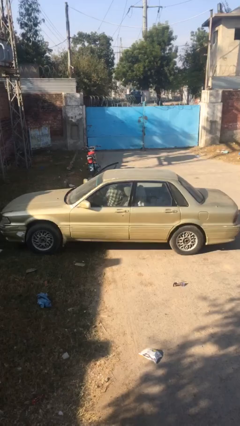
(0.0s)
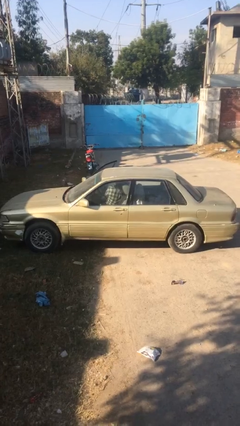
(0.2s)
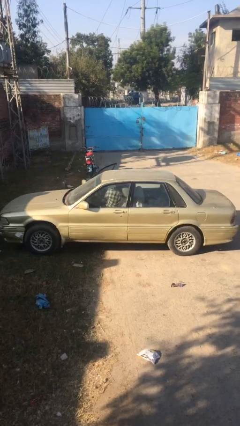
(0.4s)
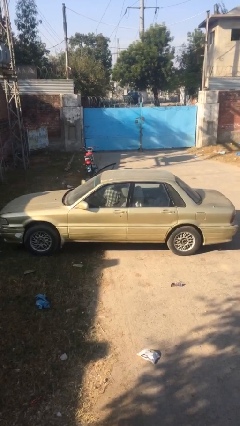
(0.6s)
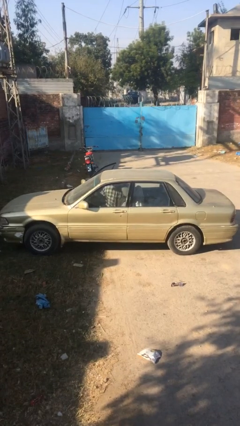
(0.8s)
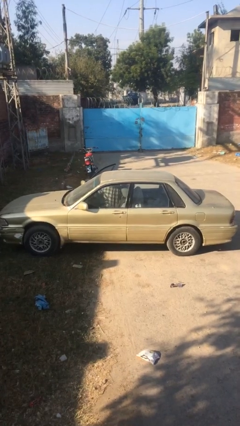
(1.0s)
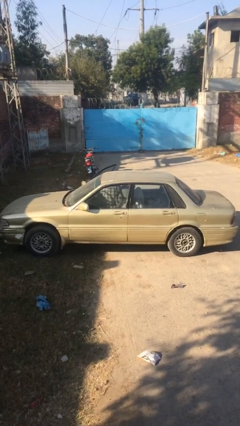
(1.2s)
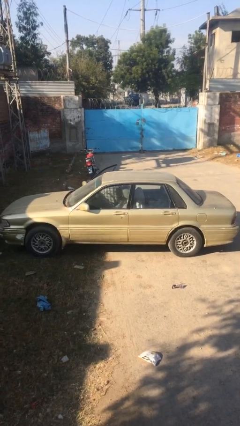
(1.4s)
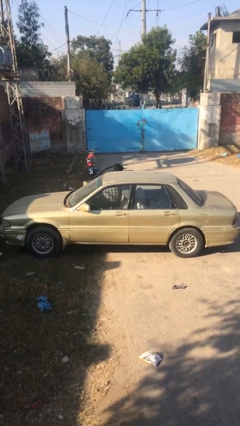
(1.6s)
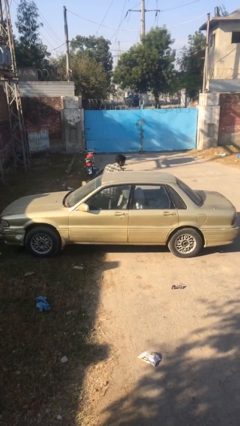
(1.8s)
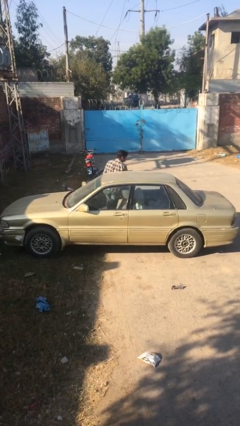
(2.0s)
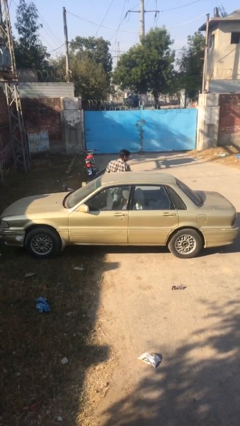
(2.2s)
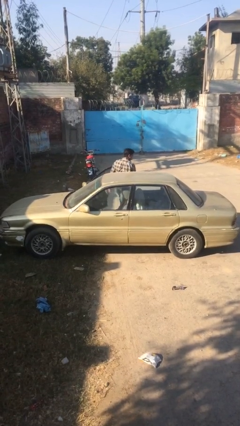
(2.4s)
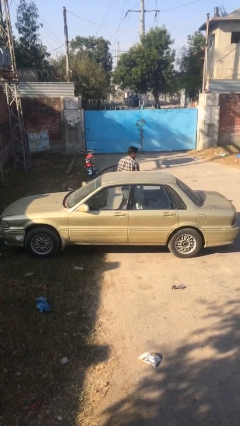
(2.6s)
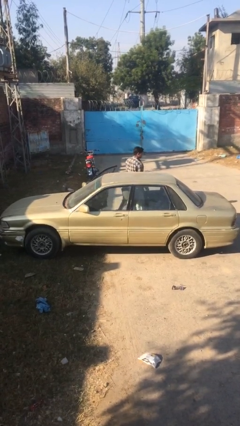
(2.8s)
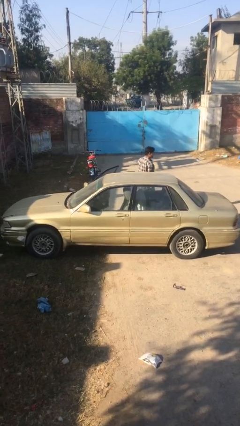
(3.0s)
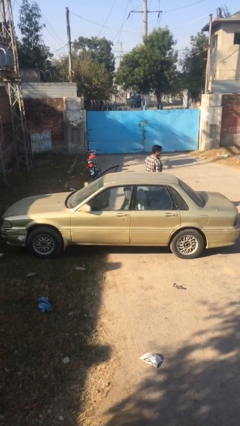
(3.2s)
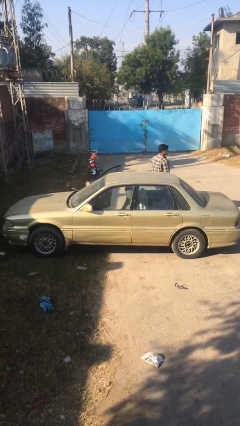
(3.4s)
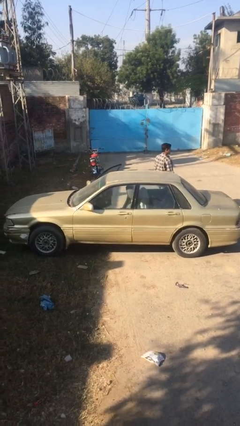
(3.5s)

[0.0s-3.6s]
person exits car

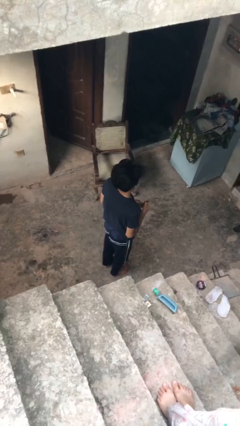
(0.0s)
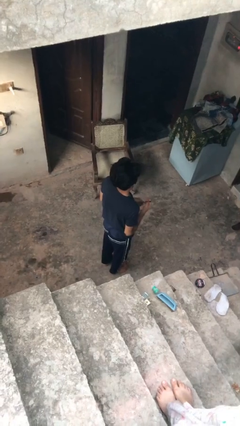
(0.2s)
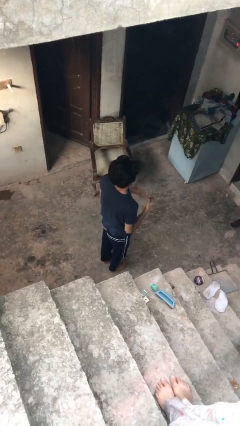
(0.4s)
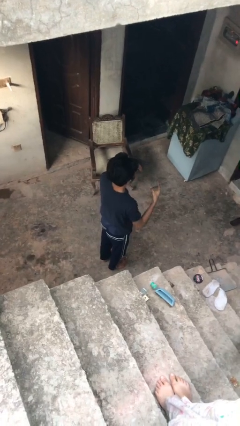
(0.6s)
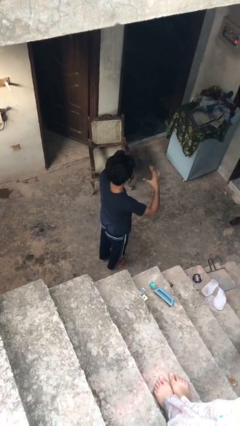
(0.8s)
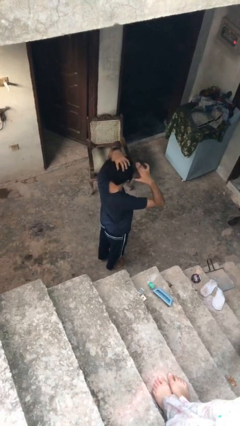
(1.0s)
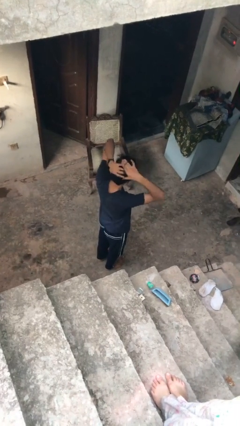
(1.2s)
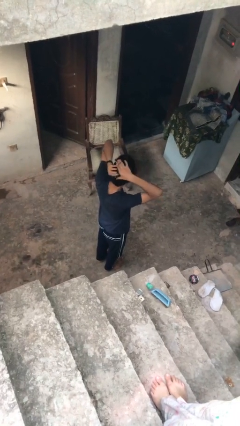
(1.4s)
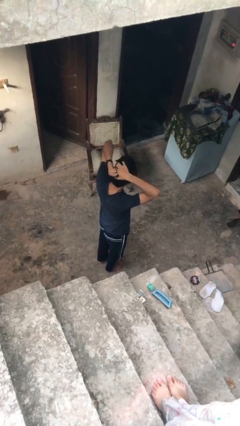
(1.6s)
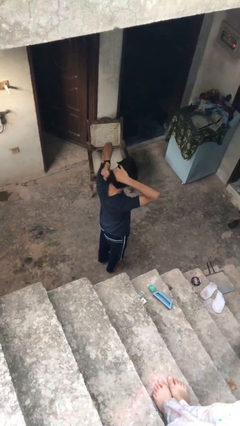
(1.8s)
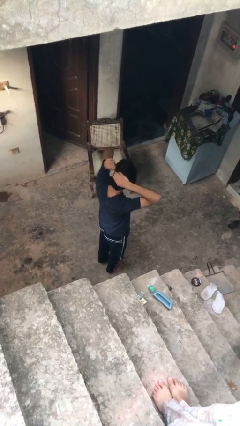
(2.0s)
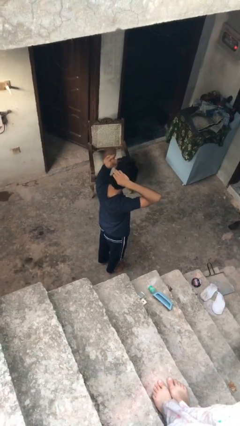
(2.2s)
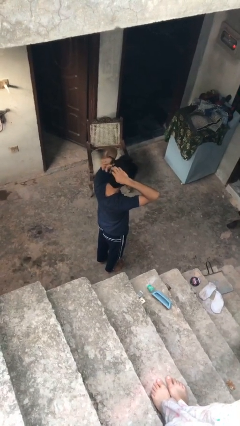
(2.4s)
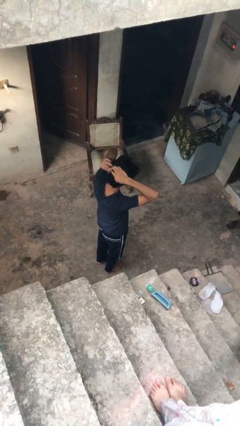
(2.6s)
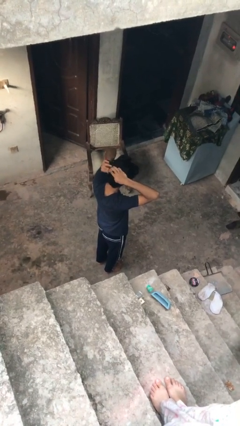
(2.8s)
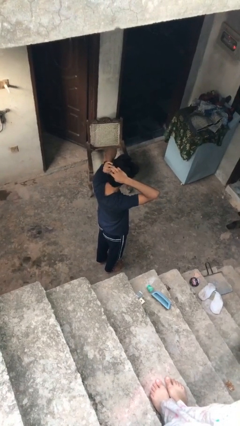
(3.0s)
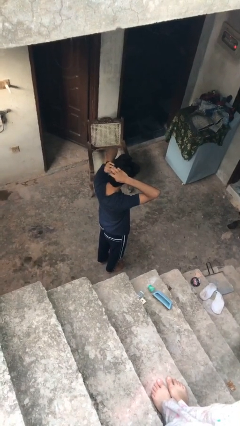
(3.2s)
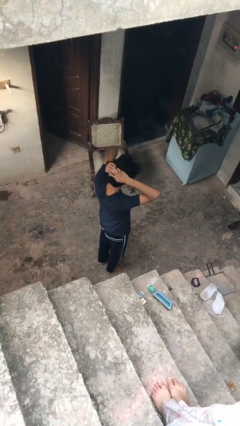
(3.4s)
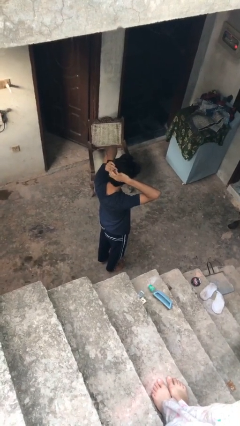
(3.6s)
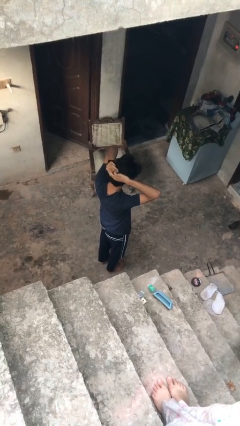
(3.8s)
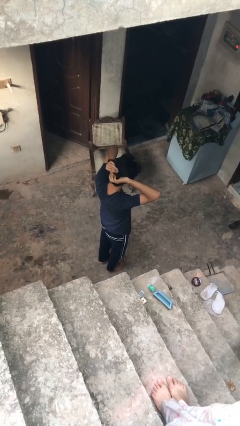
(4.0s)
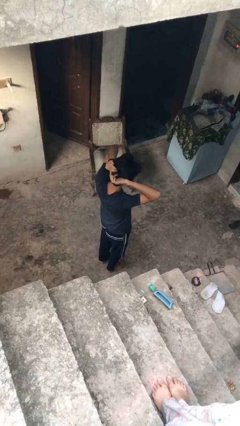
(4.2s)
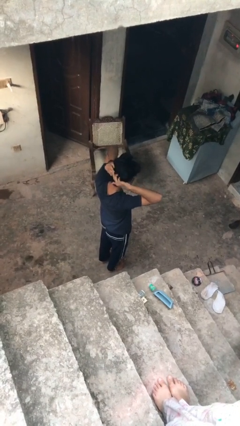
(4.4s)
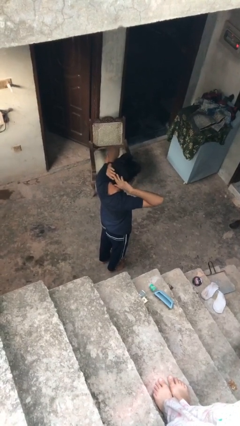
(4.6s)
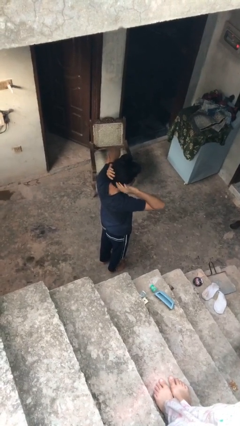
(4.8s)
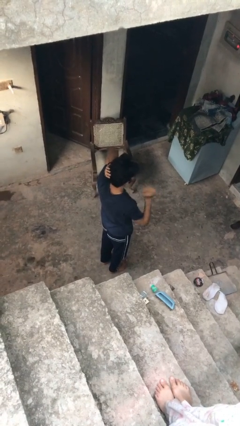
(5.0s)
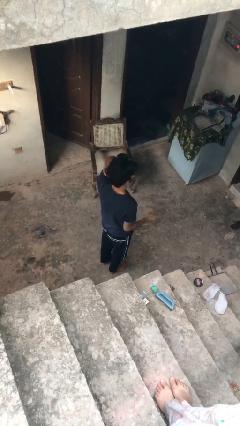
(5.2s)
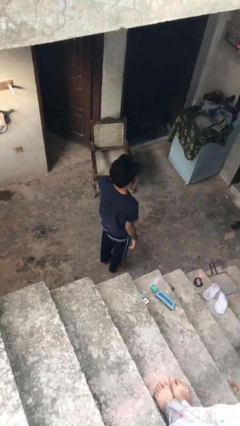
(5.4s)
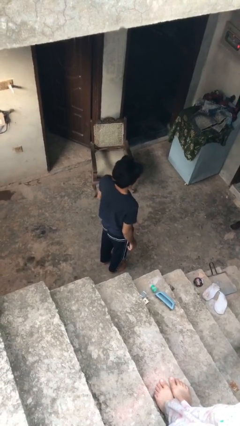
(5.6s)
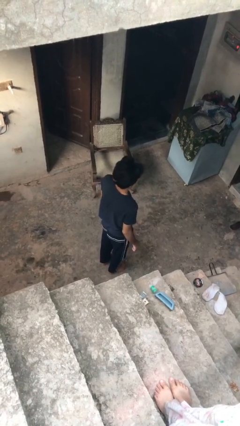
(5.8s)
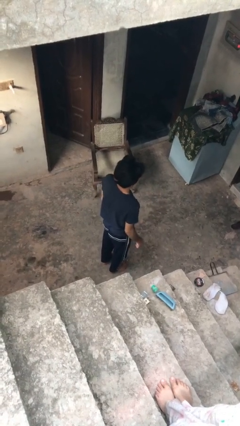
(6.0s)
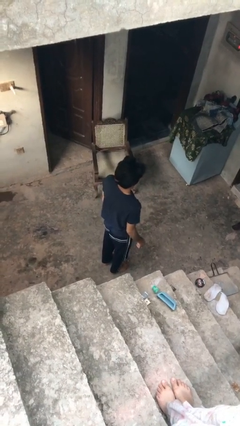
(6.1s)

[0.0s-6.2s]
person puts hair in ponytail

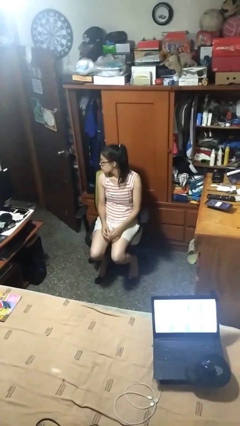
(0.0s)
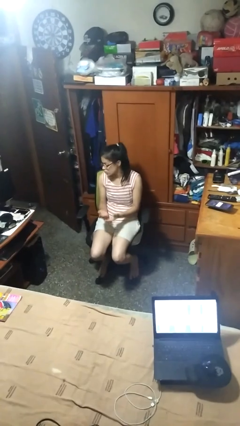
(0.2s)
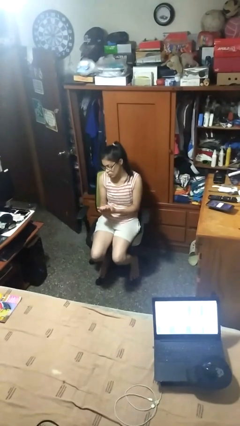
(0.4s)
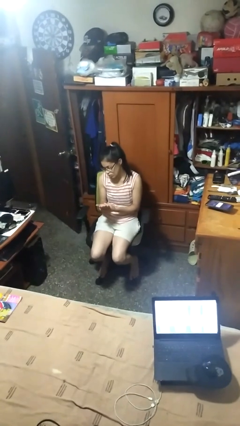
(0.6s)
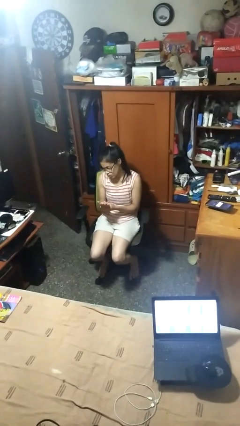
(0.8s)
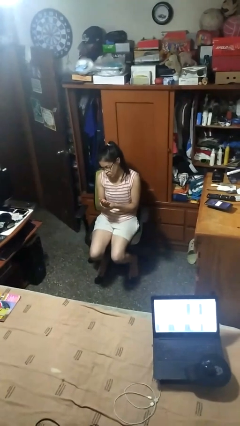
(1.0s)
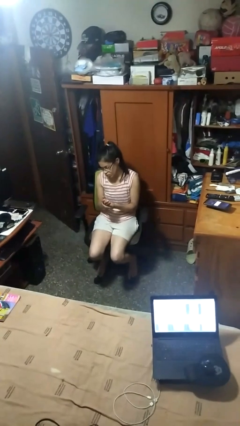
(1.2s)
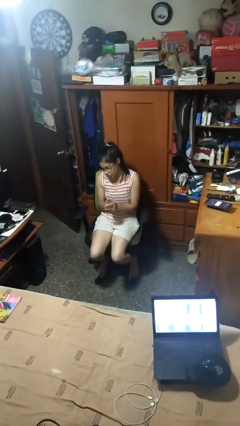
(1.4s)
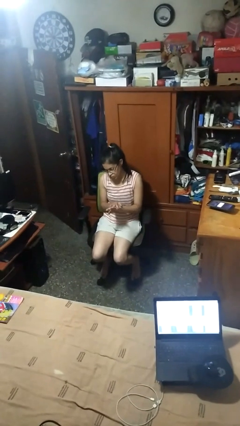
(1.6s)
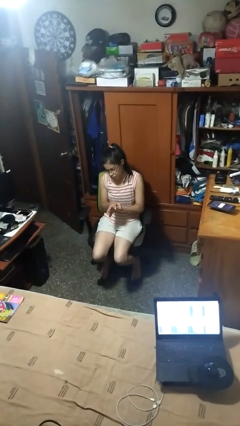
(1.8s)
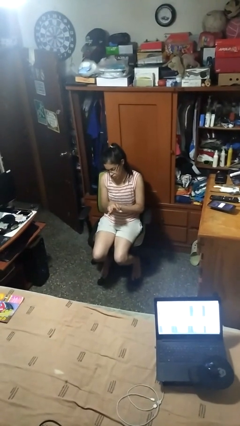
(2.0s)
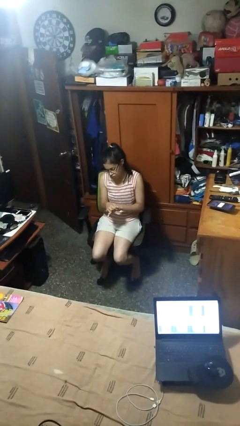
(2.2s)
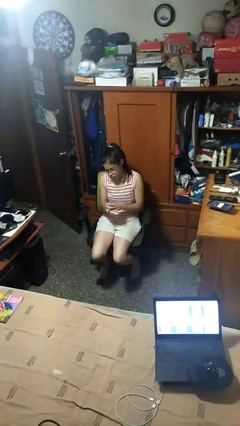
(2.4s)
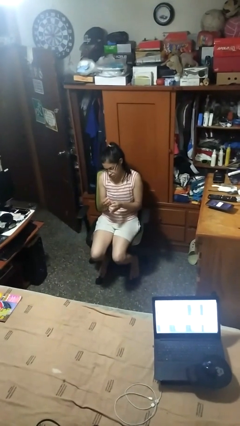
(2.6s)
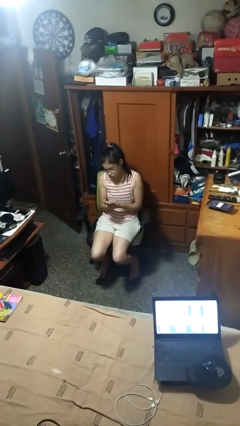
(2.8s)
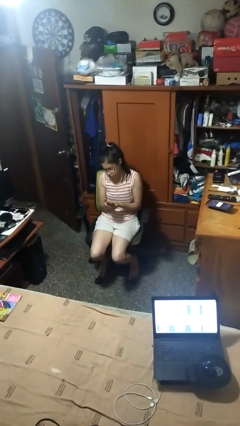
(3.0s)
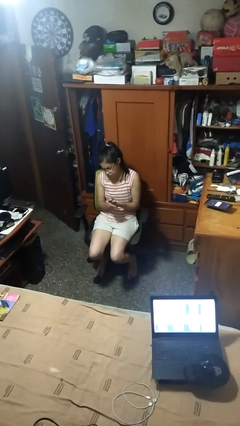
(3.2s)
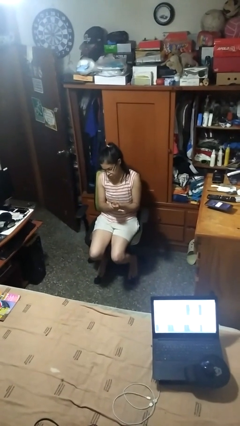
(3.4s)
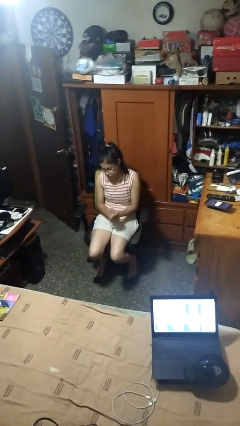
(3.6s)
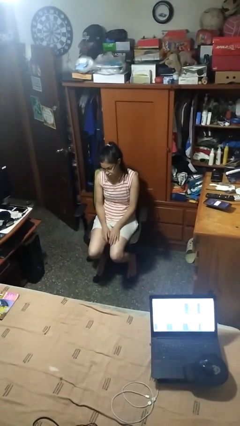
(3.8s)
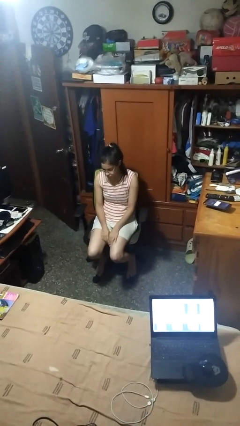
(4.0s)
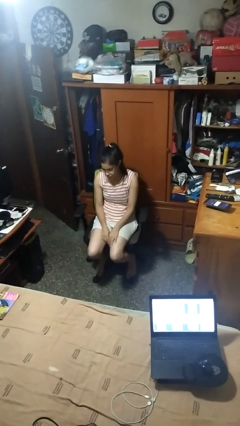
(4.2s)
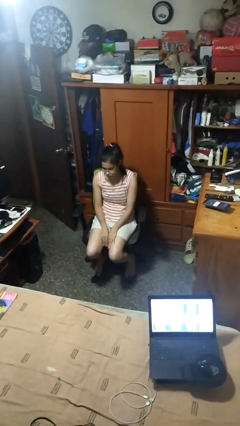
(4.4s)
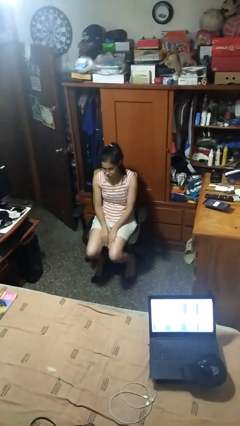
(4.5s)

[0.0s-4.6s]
person looks at hands in lap

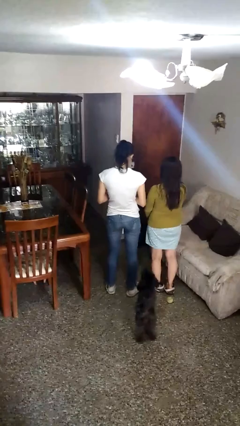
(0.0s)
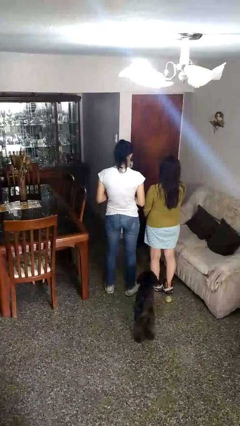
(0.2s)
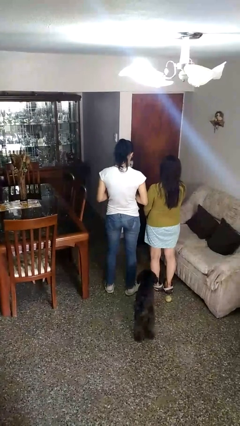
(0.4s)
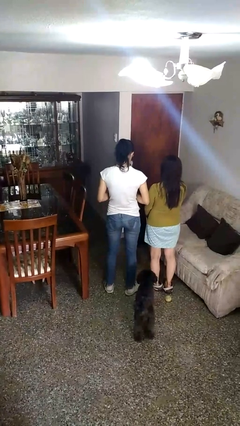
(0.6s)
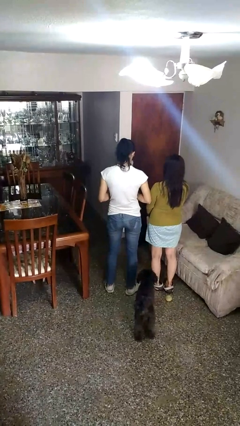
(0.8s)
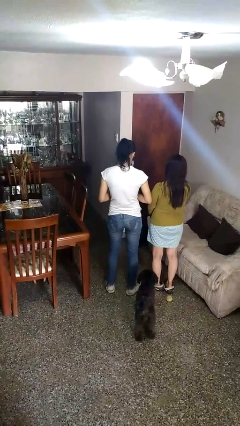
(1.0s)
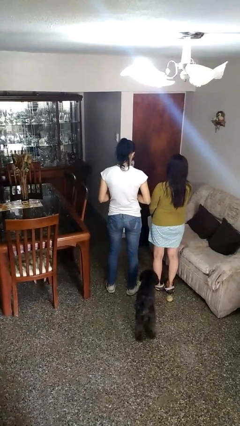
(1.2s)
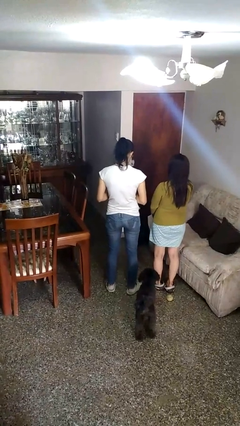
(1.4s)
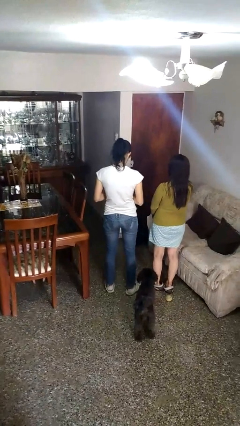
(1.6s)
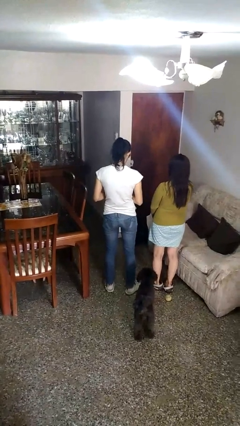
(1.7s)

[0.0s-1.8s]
person nudges person with elbow

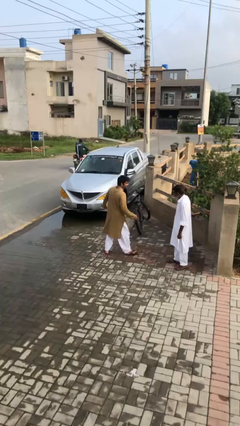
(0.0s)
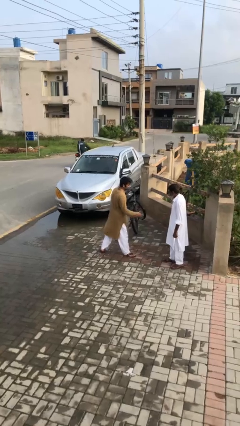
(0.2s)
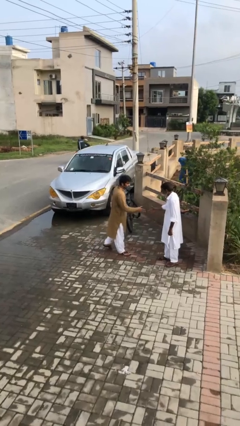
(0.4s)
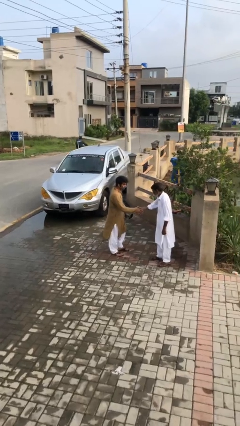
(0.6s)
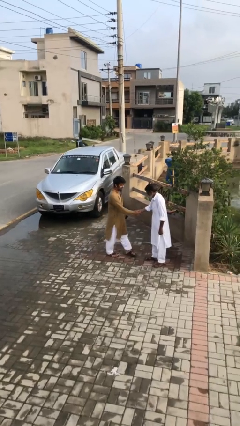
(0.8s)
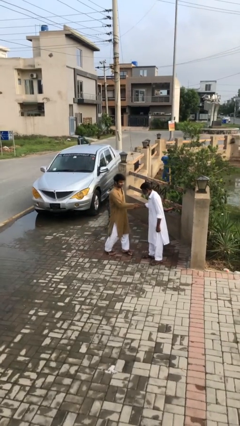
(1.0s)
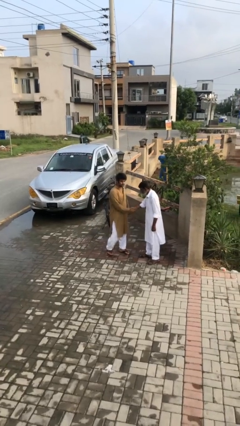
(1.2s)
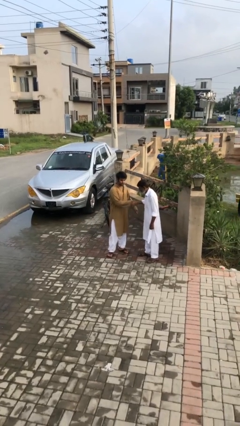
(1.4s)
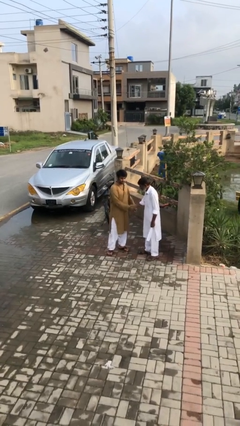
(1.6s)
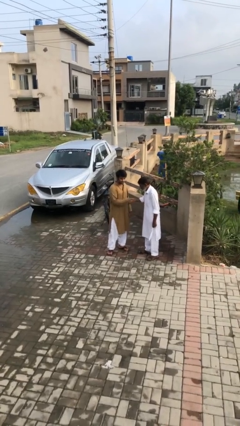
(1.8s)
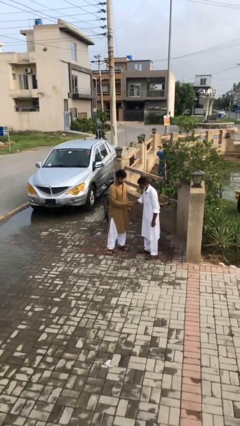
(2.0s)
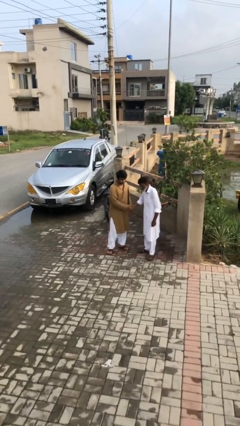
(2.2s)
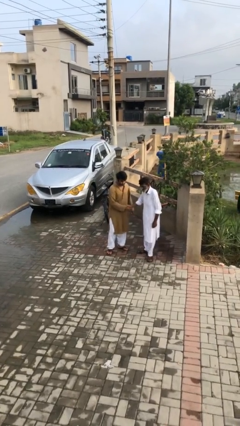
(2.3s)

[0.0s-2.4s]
person shakes hand
